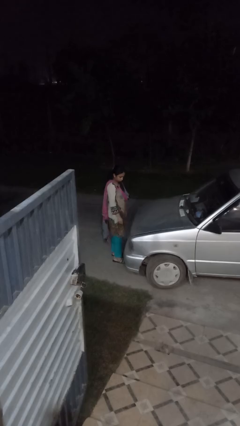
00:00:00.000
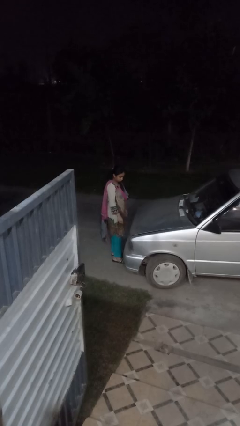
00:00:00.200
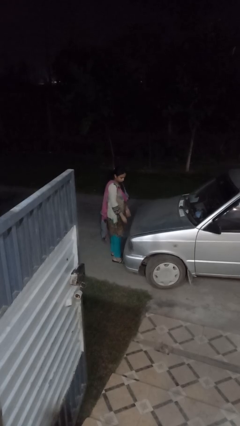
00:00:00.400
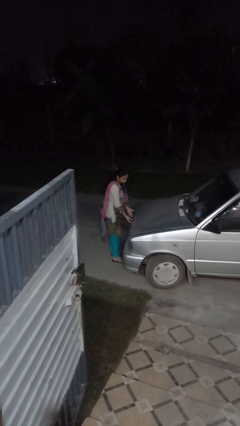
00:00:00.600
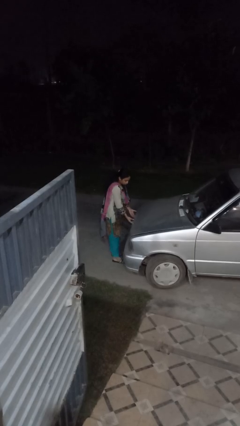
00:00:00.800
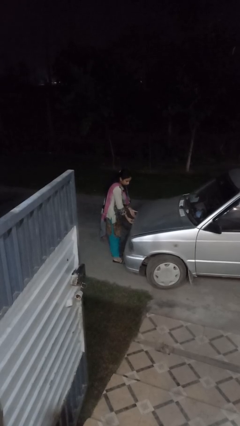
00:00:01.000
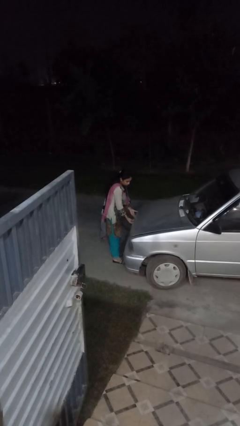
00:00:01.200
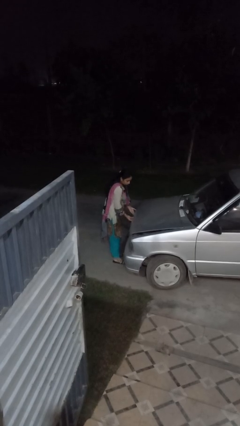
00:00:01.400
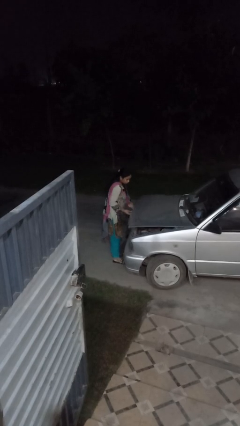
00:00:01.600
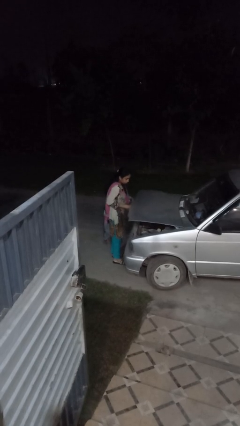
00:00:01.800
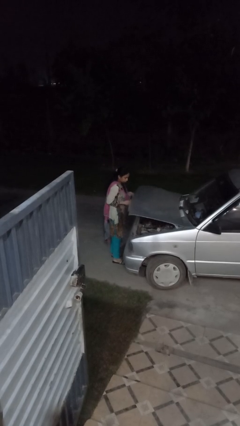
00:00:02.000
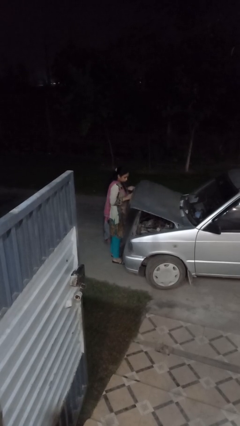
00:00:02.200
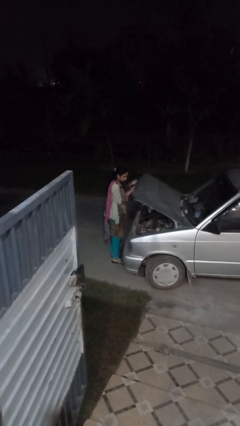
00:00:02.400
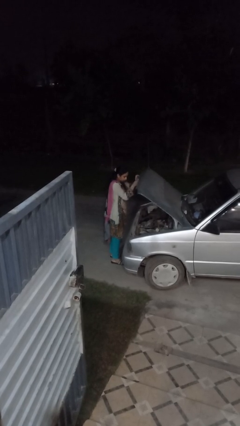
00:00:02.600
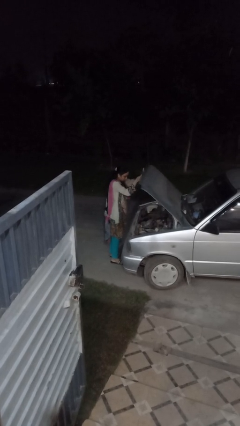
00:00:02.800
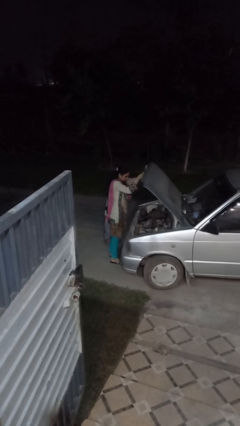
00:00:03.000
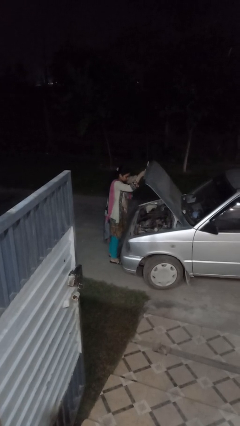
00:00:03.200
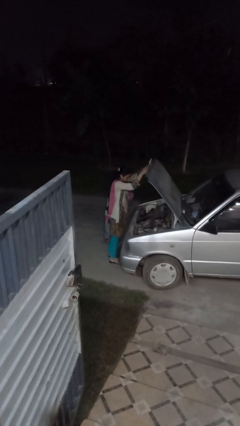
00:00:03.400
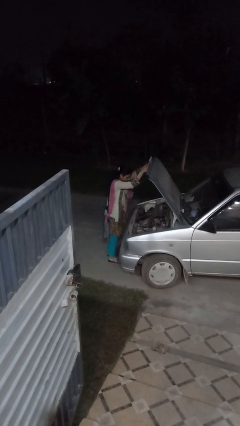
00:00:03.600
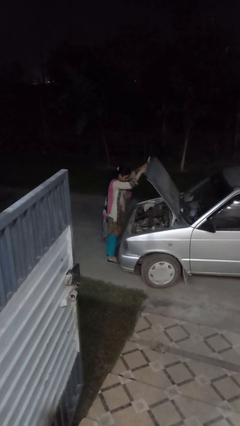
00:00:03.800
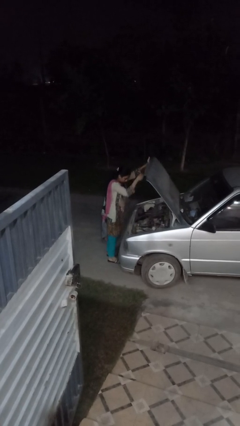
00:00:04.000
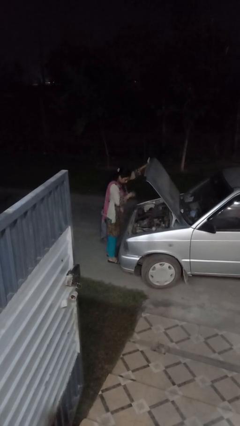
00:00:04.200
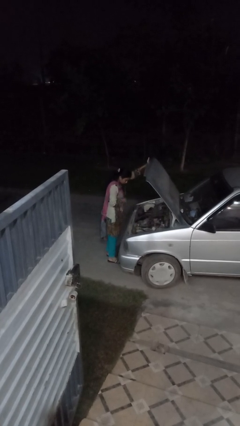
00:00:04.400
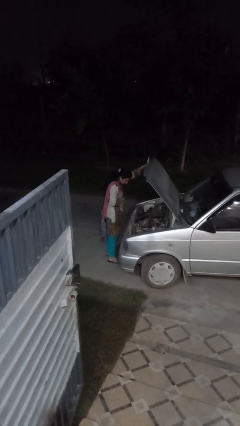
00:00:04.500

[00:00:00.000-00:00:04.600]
person opens car hood

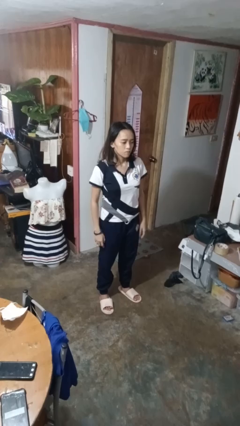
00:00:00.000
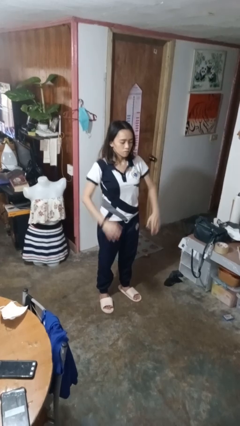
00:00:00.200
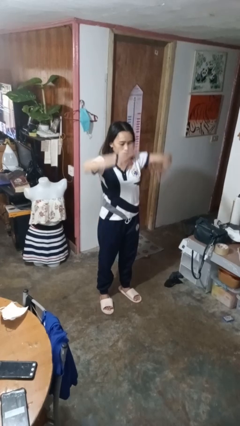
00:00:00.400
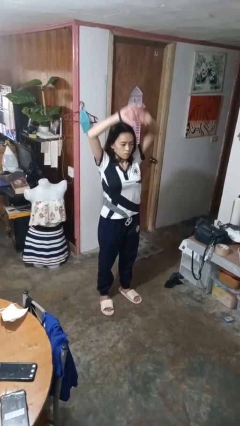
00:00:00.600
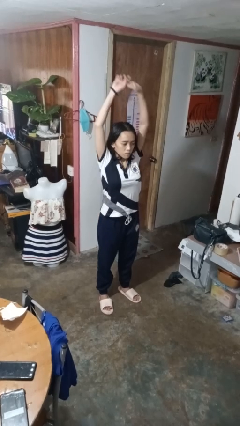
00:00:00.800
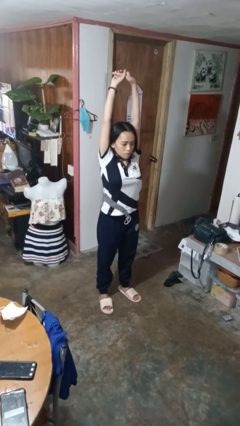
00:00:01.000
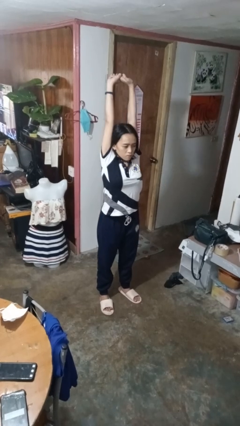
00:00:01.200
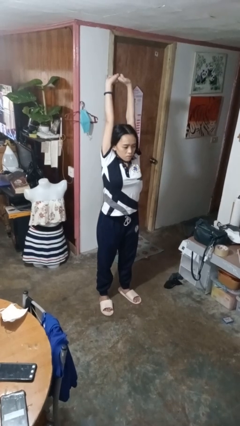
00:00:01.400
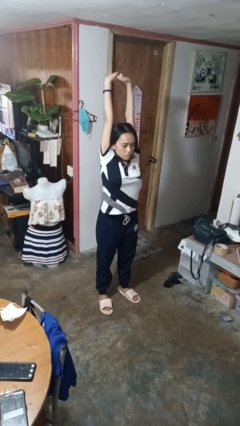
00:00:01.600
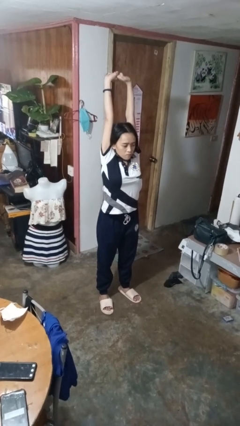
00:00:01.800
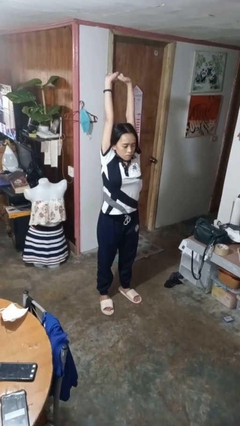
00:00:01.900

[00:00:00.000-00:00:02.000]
person stretches arms over head

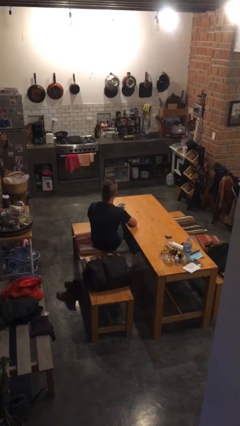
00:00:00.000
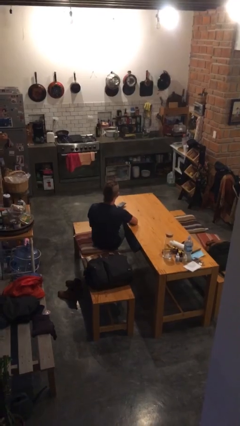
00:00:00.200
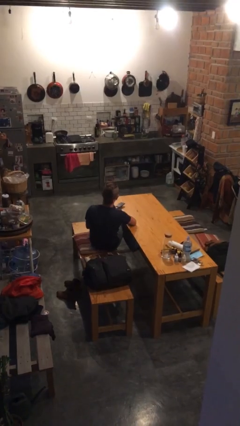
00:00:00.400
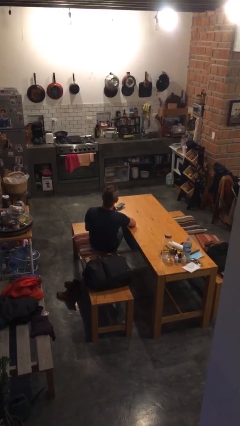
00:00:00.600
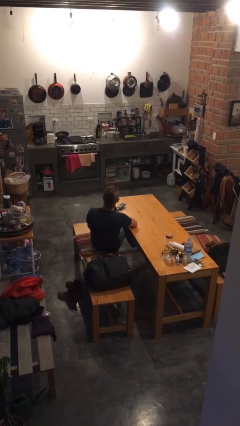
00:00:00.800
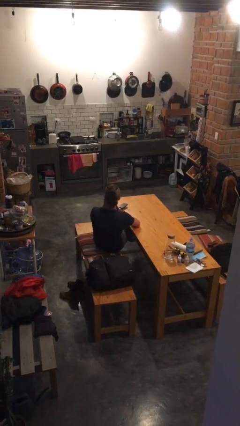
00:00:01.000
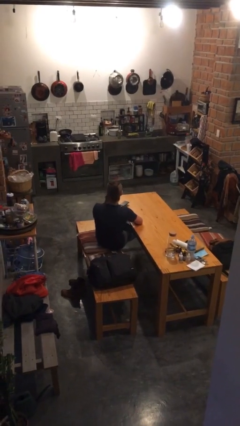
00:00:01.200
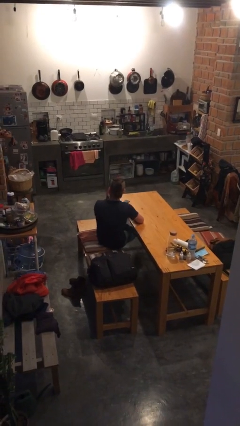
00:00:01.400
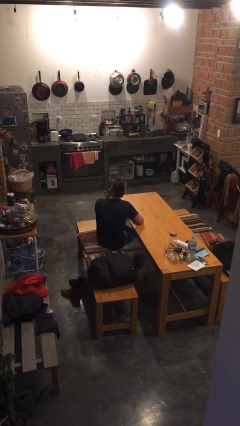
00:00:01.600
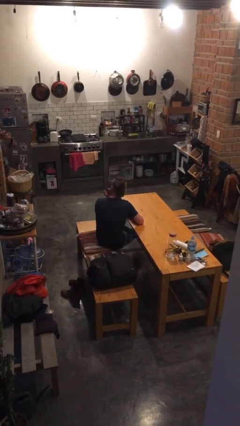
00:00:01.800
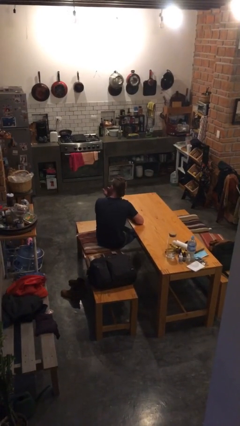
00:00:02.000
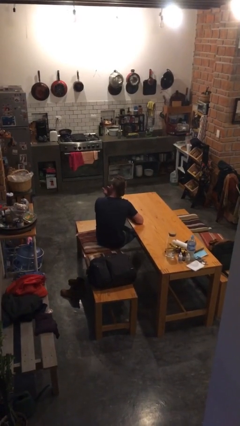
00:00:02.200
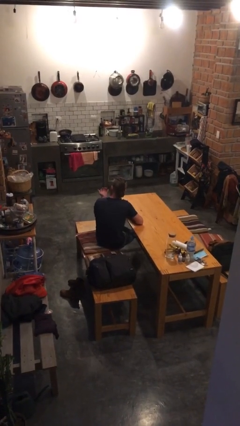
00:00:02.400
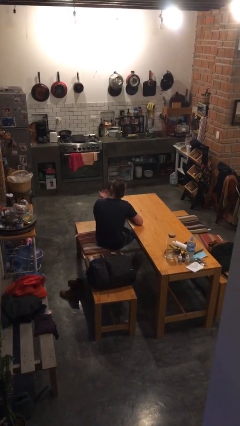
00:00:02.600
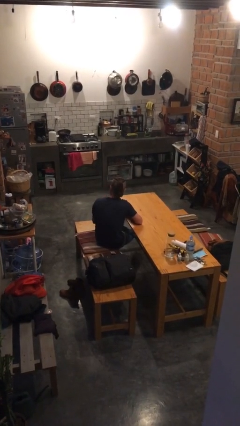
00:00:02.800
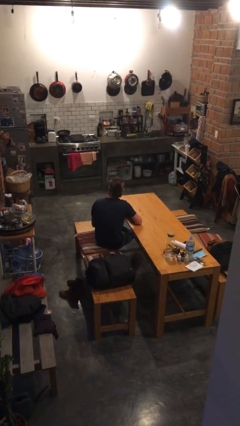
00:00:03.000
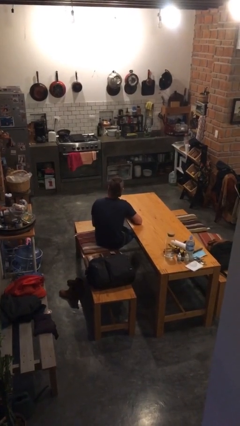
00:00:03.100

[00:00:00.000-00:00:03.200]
person licks fingers

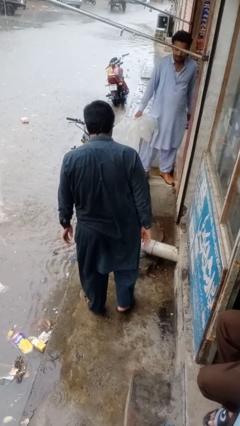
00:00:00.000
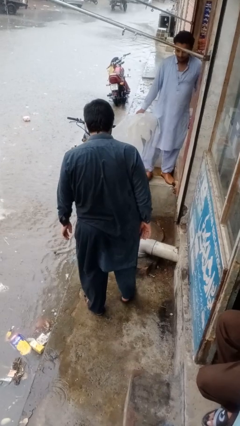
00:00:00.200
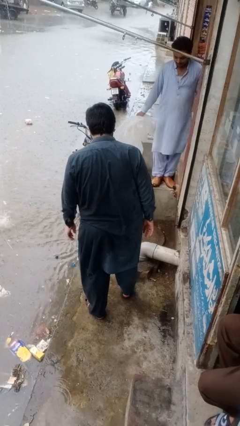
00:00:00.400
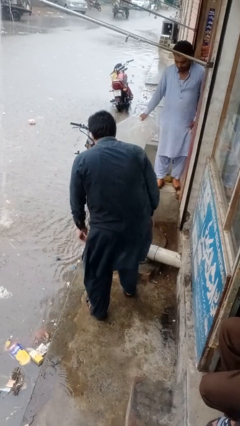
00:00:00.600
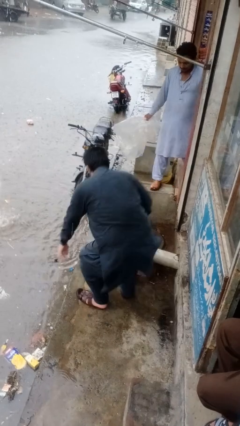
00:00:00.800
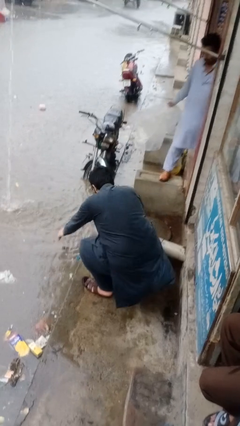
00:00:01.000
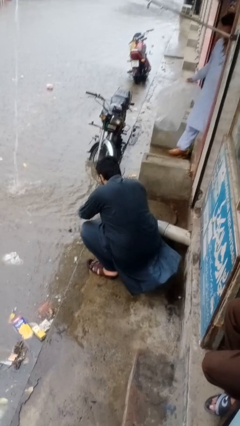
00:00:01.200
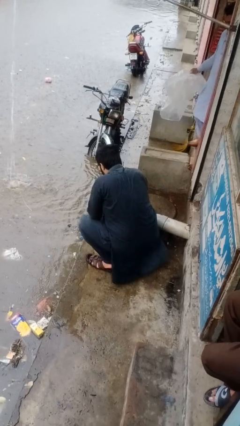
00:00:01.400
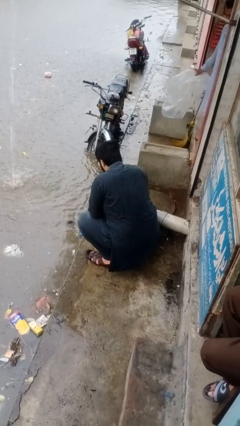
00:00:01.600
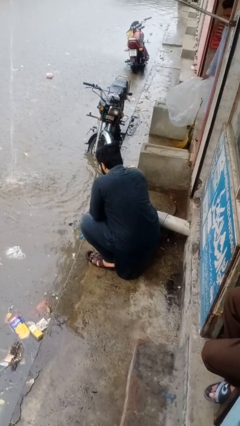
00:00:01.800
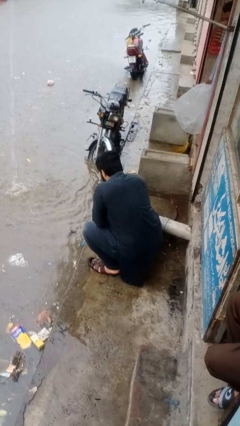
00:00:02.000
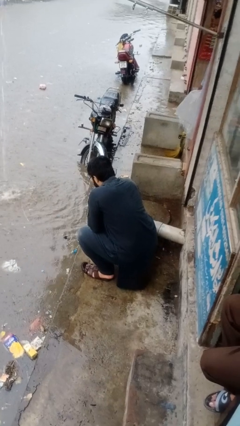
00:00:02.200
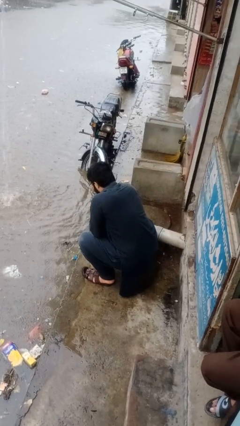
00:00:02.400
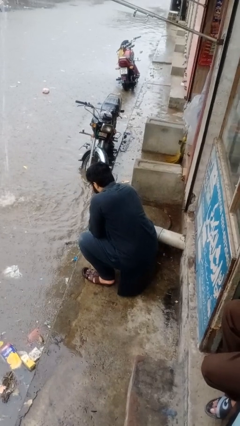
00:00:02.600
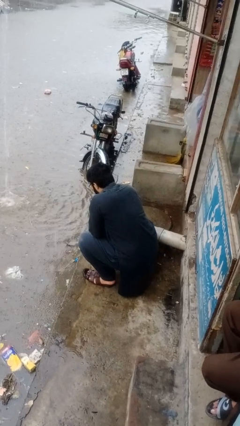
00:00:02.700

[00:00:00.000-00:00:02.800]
person lies down on floor

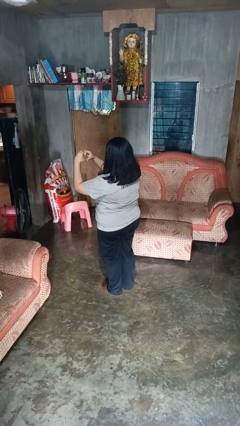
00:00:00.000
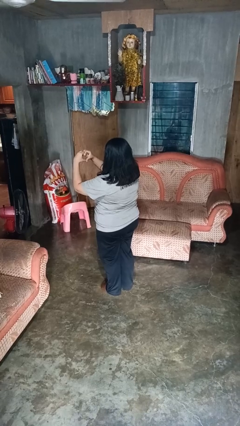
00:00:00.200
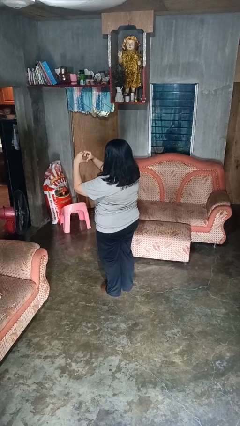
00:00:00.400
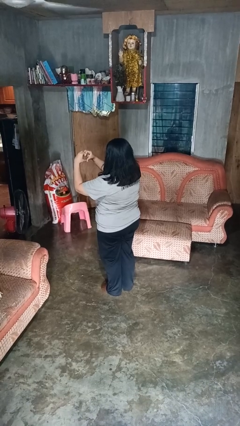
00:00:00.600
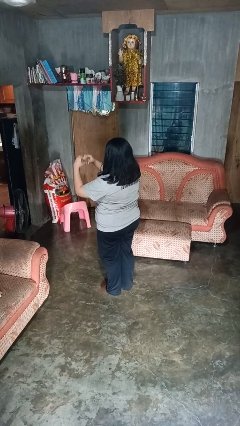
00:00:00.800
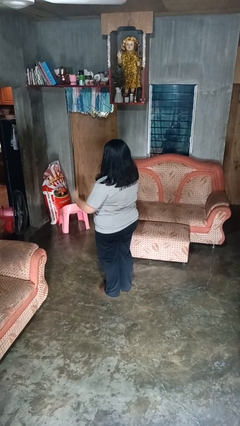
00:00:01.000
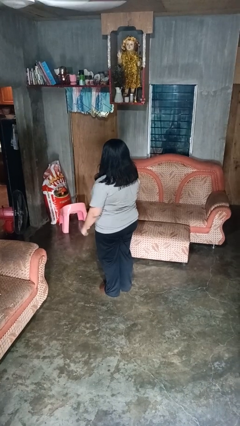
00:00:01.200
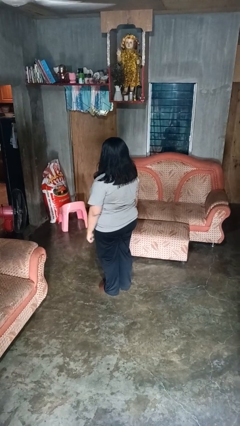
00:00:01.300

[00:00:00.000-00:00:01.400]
person gestures heart

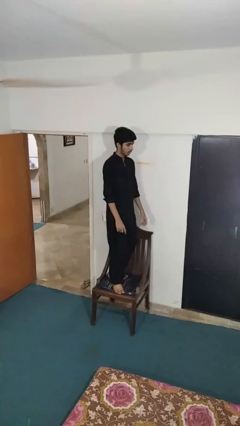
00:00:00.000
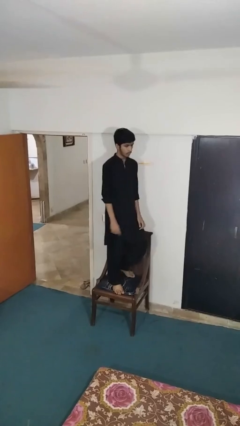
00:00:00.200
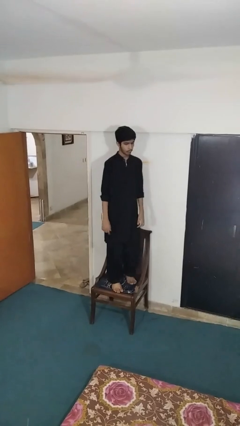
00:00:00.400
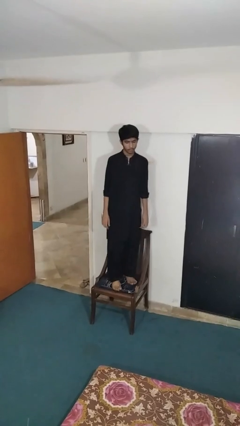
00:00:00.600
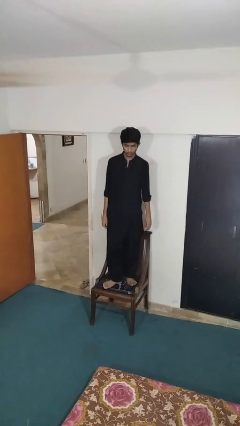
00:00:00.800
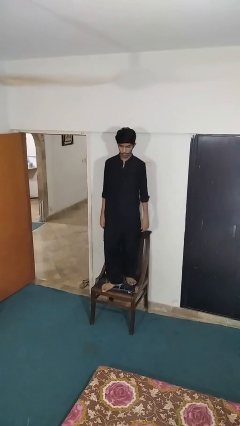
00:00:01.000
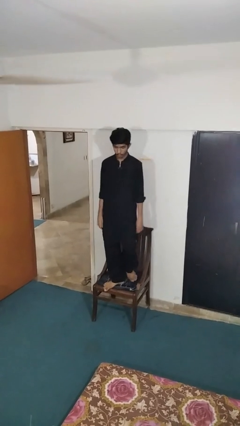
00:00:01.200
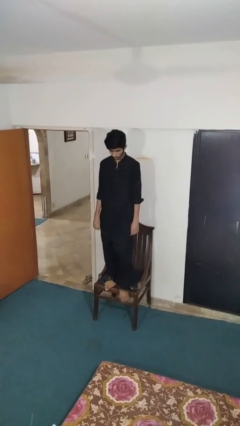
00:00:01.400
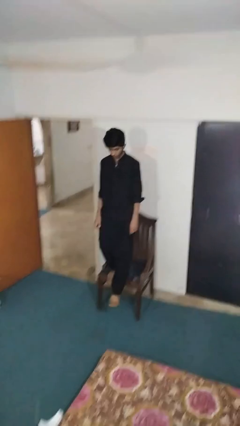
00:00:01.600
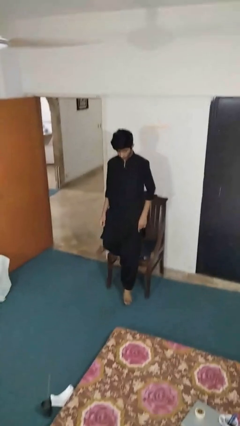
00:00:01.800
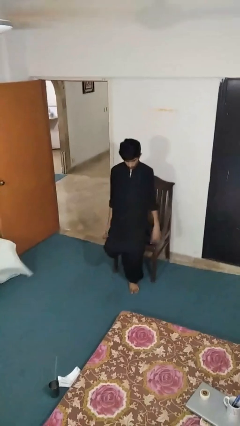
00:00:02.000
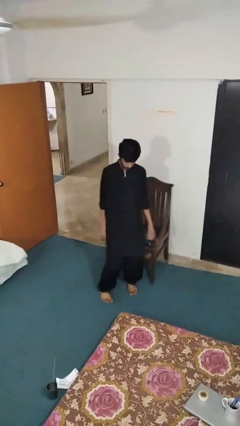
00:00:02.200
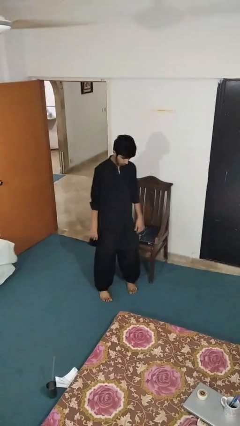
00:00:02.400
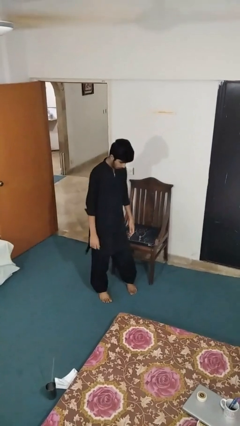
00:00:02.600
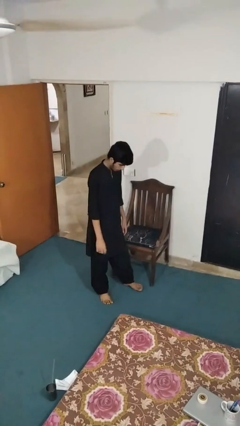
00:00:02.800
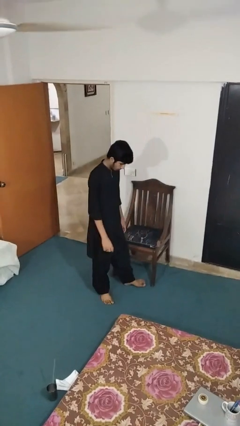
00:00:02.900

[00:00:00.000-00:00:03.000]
person climbs off chair

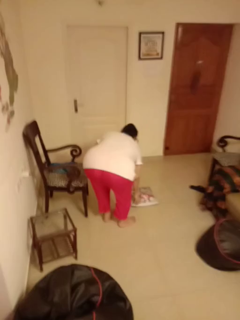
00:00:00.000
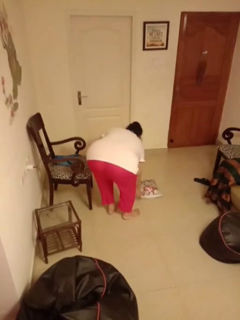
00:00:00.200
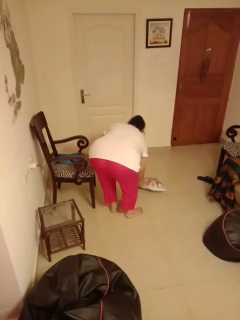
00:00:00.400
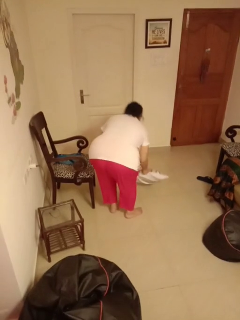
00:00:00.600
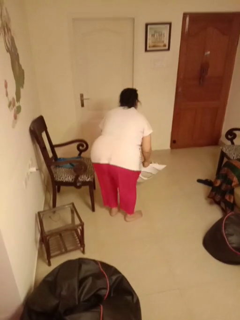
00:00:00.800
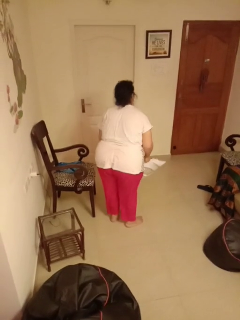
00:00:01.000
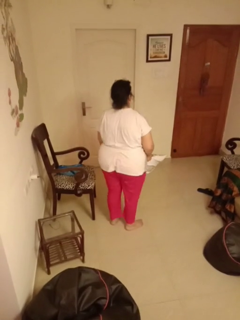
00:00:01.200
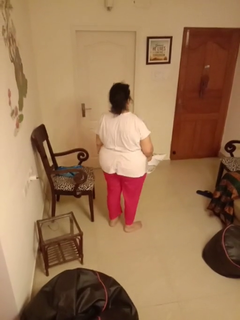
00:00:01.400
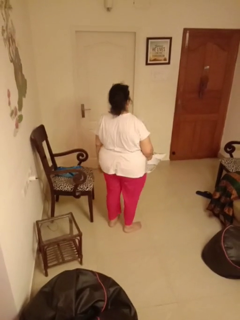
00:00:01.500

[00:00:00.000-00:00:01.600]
person picks up object from floor
